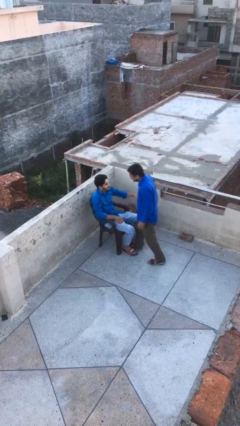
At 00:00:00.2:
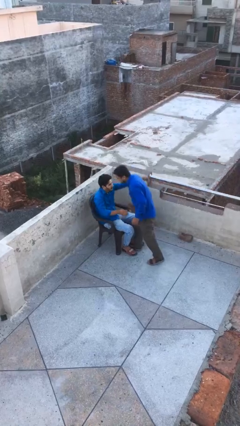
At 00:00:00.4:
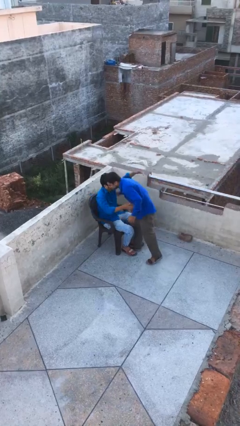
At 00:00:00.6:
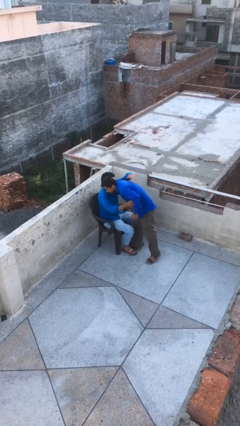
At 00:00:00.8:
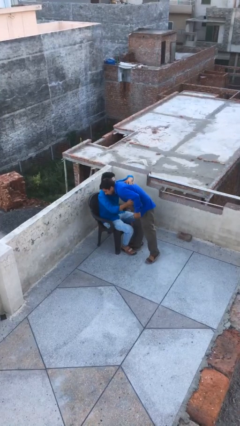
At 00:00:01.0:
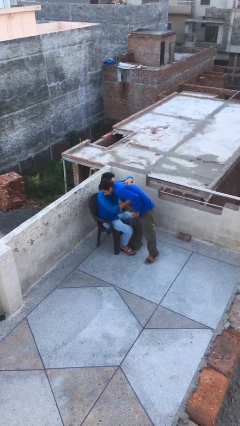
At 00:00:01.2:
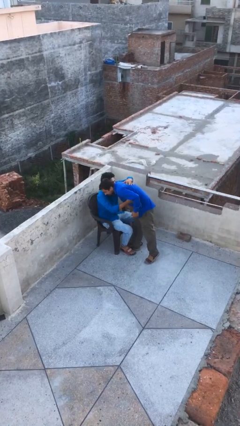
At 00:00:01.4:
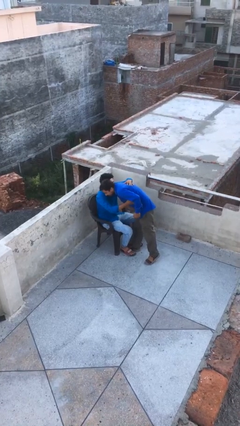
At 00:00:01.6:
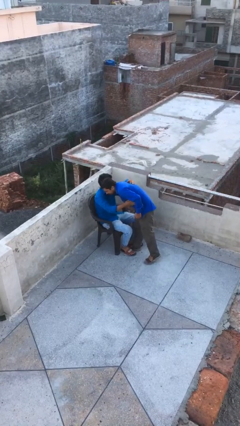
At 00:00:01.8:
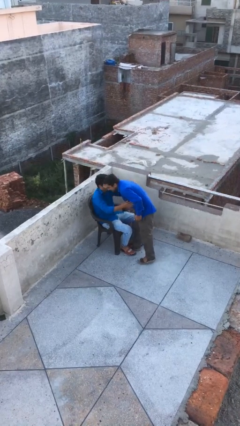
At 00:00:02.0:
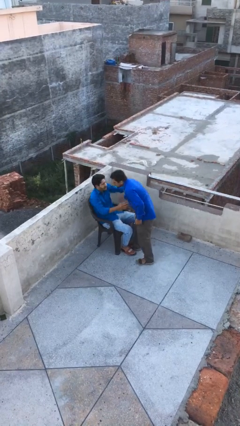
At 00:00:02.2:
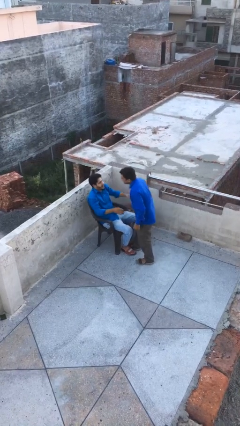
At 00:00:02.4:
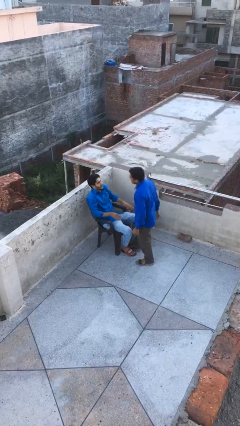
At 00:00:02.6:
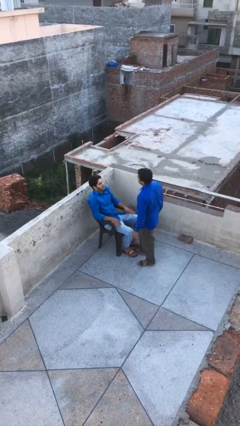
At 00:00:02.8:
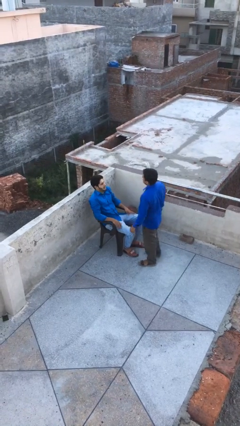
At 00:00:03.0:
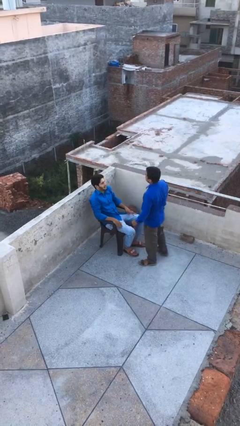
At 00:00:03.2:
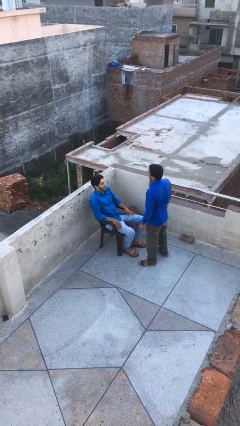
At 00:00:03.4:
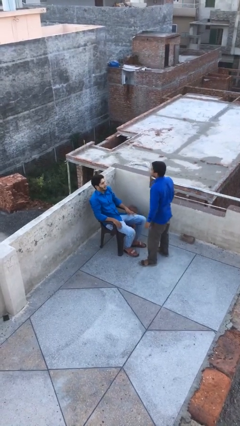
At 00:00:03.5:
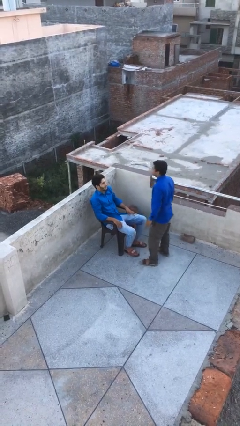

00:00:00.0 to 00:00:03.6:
person embraces person

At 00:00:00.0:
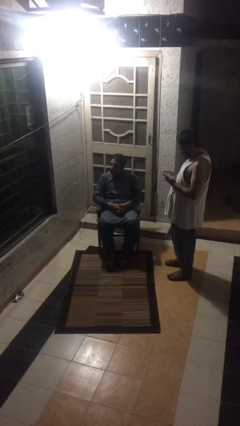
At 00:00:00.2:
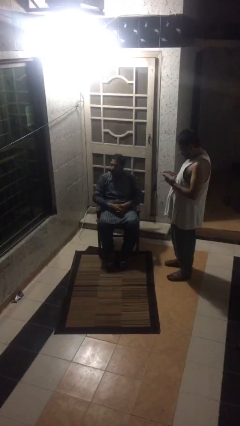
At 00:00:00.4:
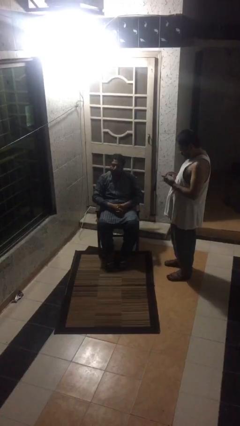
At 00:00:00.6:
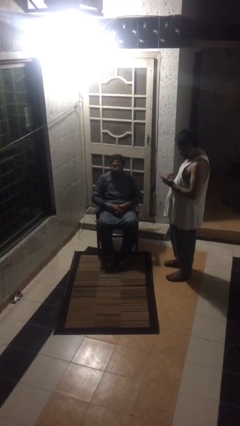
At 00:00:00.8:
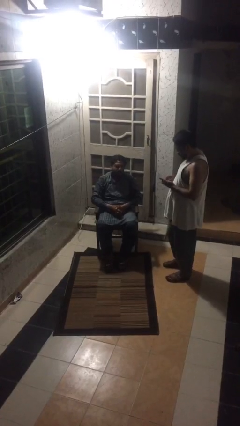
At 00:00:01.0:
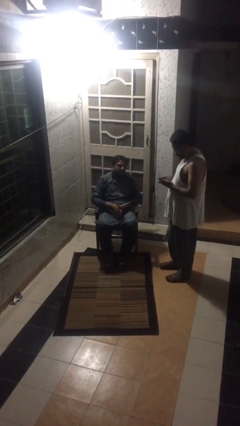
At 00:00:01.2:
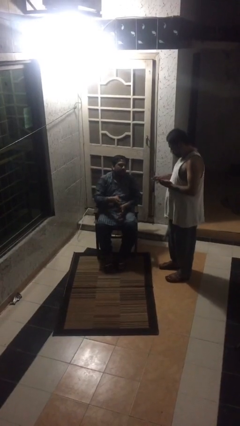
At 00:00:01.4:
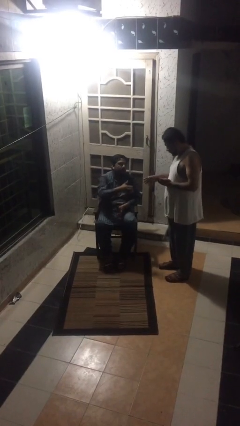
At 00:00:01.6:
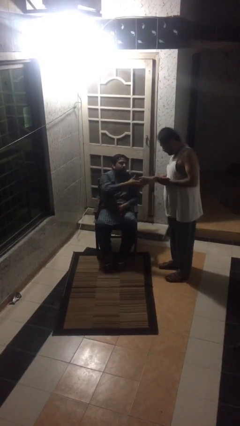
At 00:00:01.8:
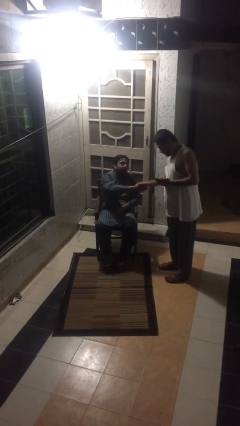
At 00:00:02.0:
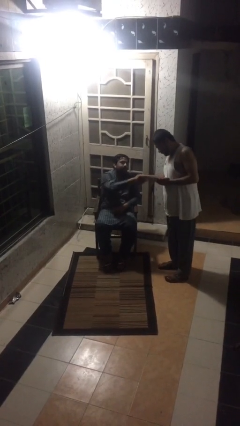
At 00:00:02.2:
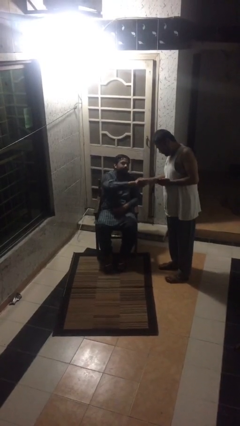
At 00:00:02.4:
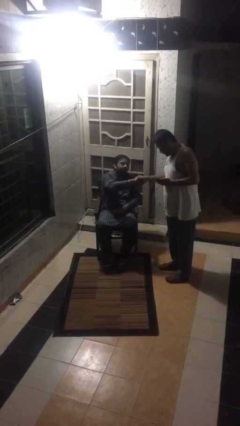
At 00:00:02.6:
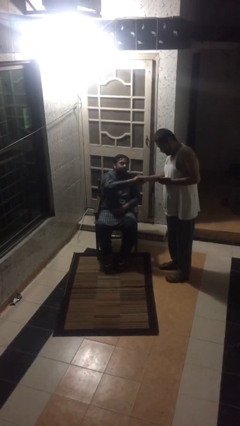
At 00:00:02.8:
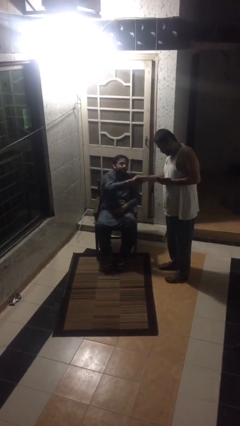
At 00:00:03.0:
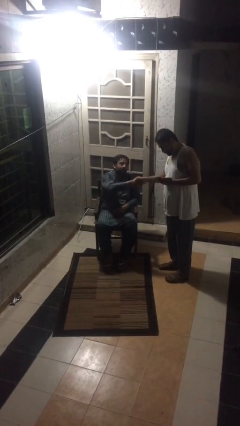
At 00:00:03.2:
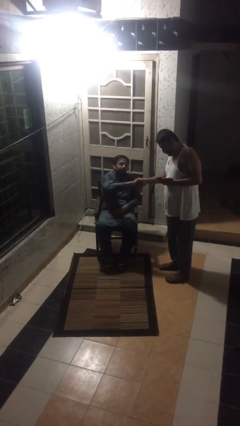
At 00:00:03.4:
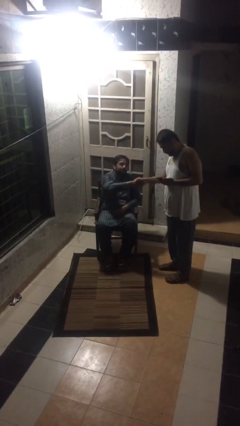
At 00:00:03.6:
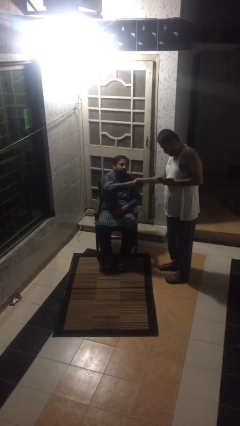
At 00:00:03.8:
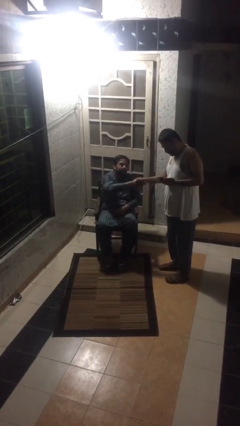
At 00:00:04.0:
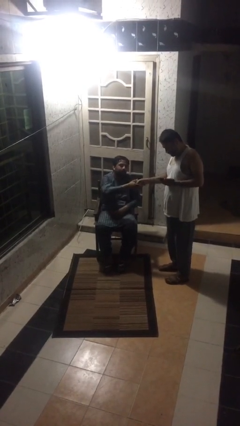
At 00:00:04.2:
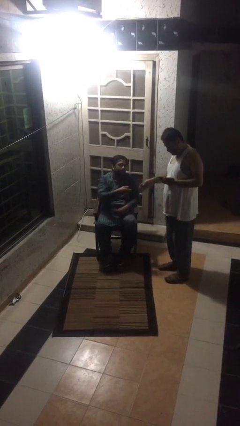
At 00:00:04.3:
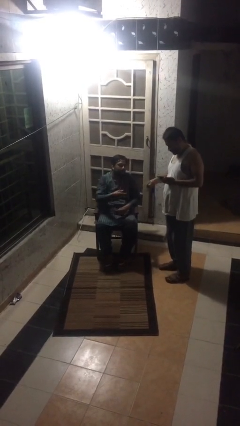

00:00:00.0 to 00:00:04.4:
person shakes hand

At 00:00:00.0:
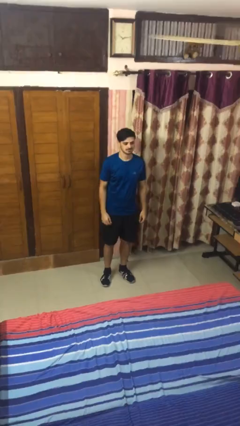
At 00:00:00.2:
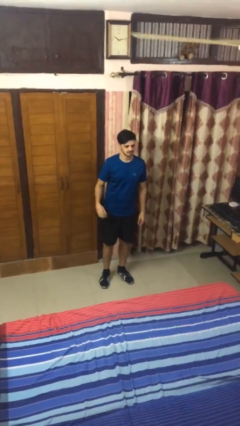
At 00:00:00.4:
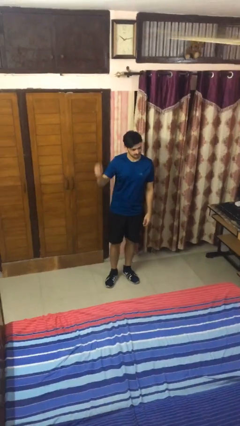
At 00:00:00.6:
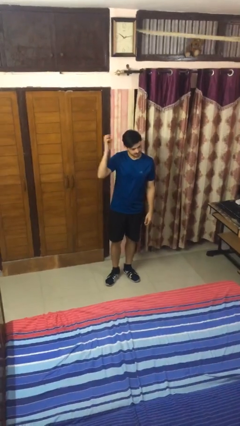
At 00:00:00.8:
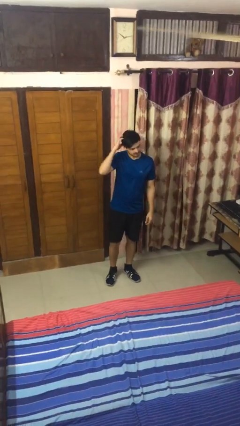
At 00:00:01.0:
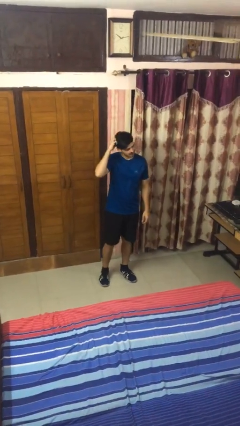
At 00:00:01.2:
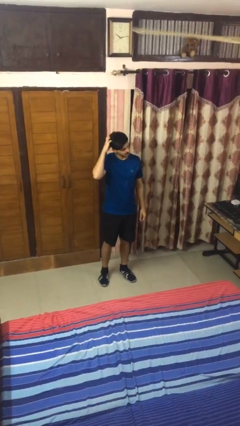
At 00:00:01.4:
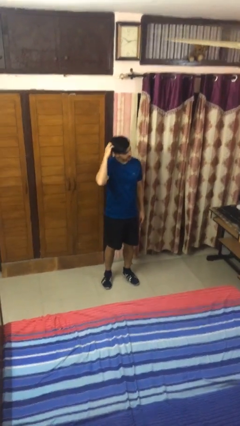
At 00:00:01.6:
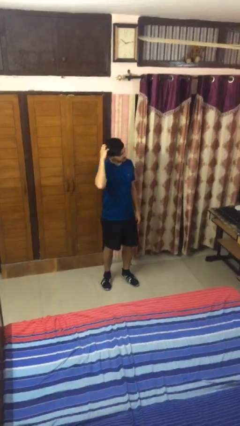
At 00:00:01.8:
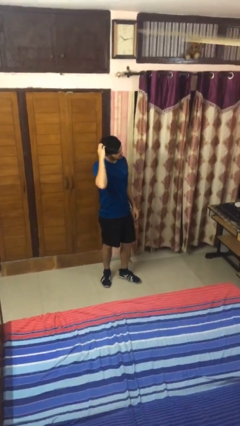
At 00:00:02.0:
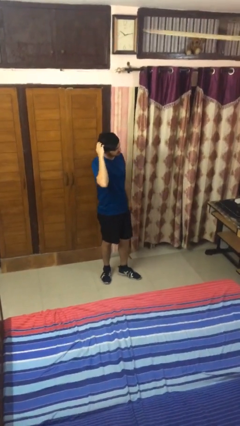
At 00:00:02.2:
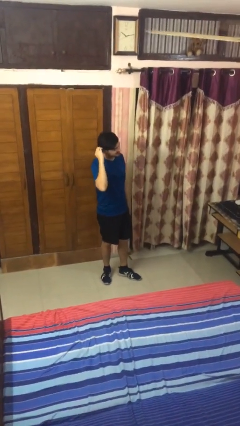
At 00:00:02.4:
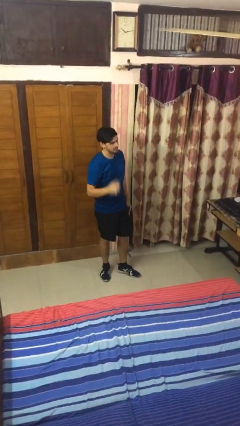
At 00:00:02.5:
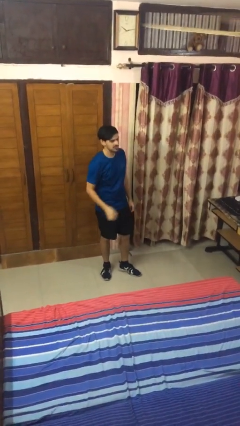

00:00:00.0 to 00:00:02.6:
person scratches face

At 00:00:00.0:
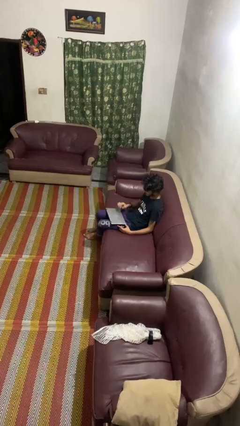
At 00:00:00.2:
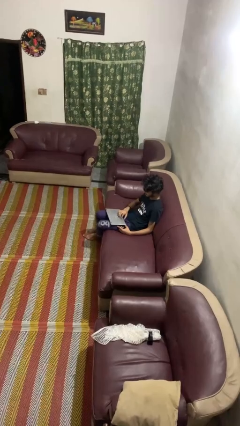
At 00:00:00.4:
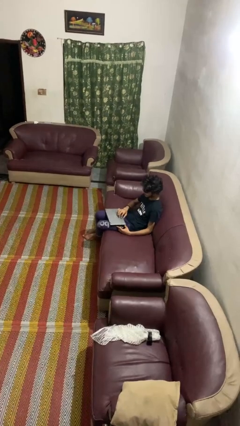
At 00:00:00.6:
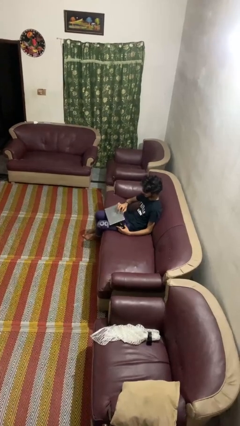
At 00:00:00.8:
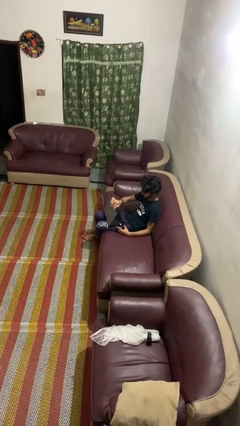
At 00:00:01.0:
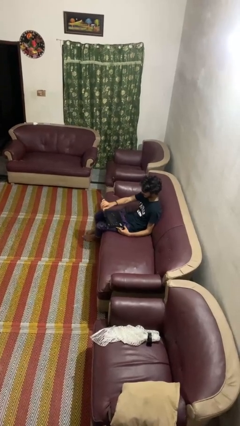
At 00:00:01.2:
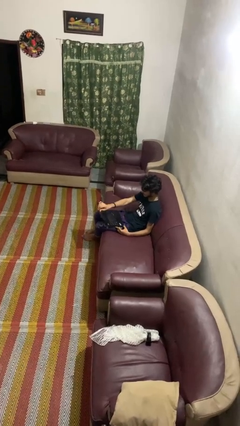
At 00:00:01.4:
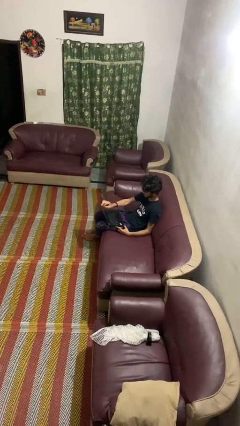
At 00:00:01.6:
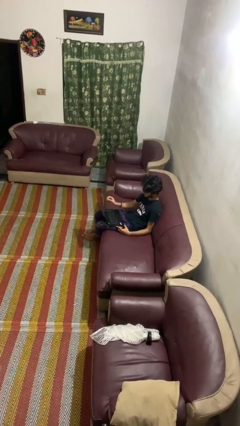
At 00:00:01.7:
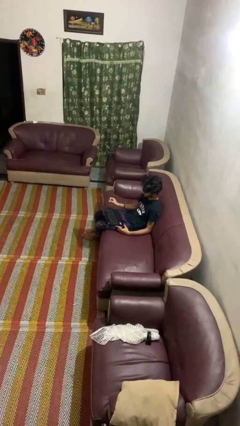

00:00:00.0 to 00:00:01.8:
person opens laptop

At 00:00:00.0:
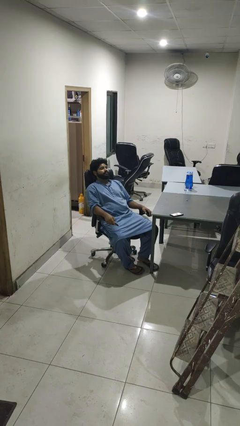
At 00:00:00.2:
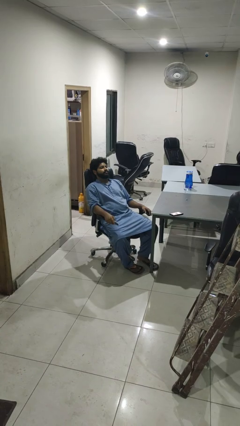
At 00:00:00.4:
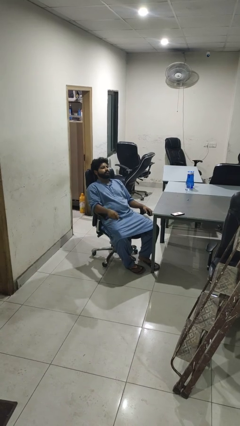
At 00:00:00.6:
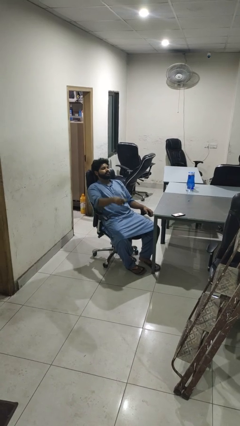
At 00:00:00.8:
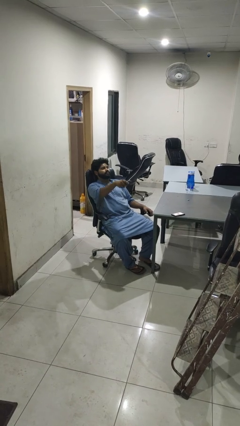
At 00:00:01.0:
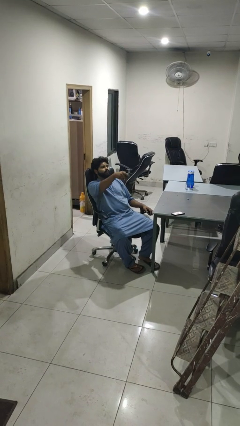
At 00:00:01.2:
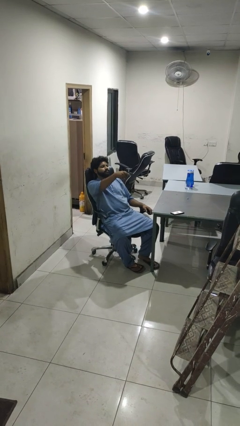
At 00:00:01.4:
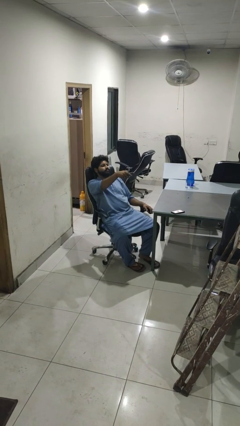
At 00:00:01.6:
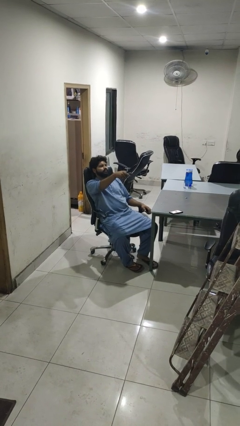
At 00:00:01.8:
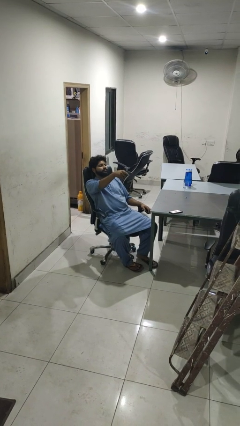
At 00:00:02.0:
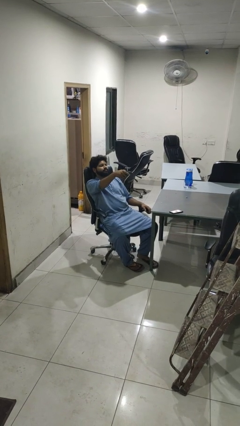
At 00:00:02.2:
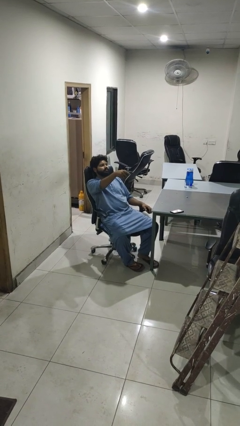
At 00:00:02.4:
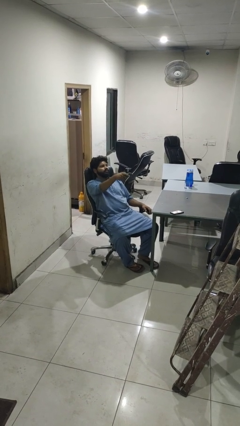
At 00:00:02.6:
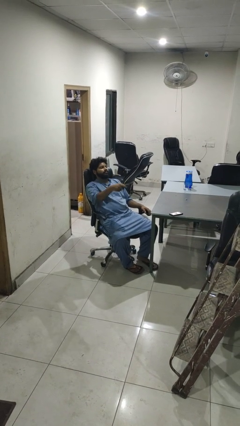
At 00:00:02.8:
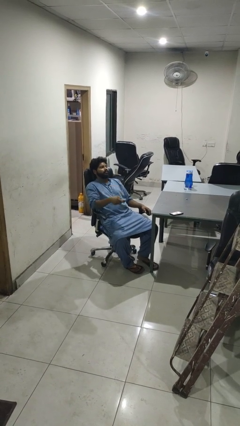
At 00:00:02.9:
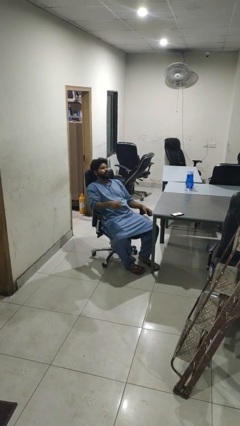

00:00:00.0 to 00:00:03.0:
person uses television remote

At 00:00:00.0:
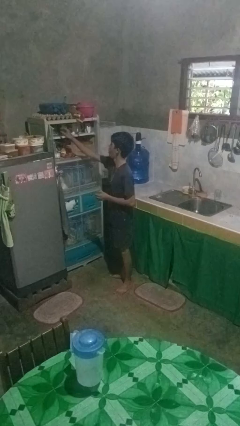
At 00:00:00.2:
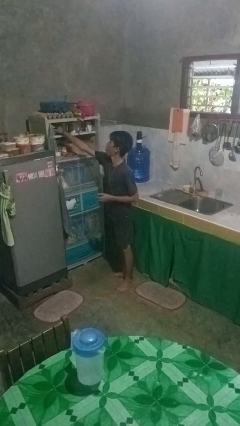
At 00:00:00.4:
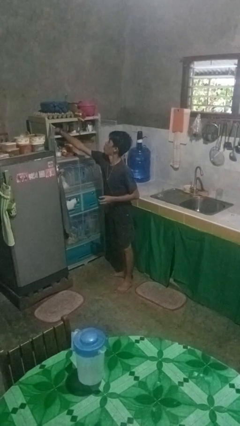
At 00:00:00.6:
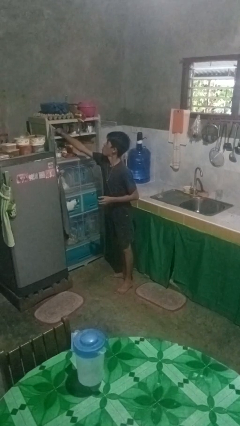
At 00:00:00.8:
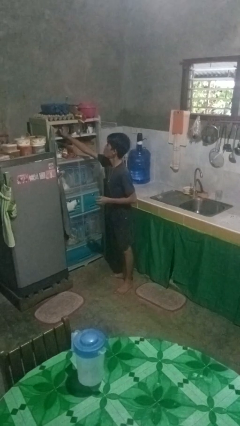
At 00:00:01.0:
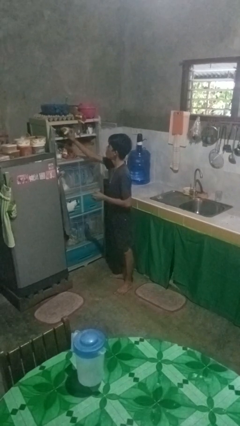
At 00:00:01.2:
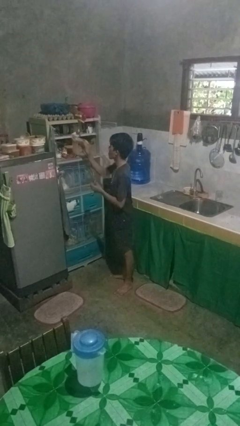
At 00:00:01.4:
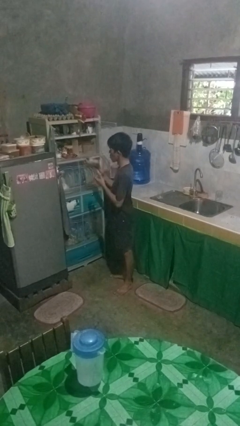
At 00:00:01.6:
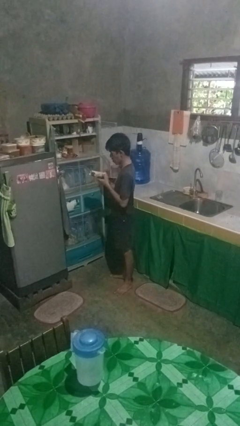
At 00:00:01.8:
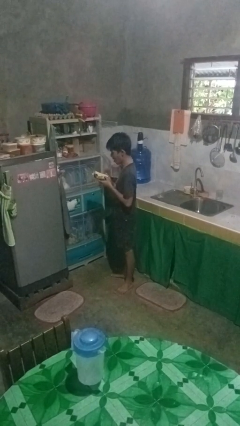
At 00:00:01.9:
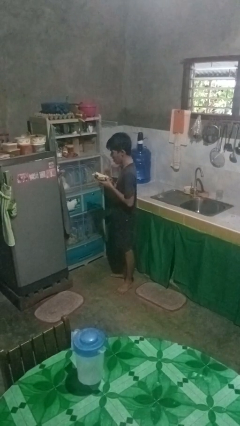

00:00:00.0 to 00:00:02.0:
person takes object from cabinet
